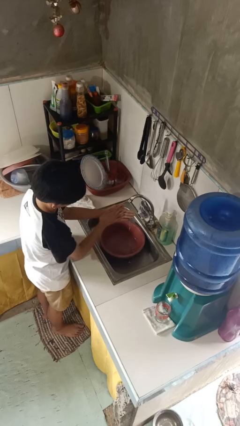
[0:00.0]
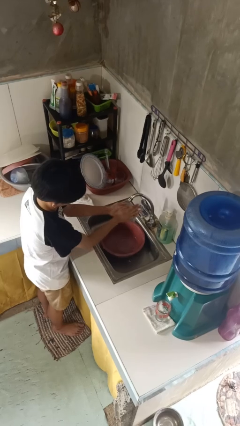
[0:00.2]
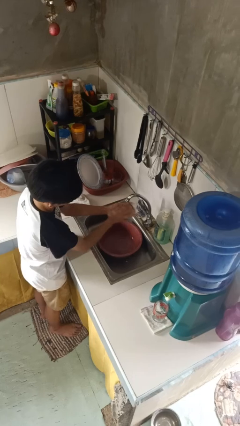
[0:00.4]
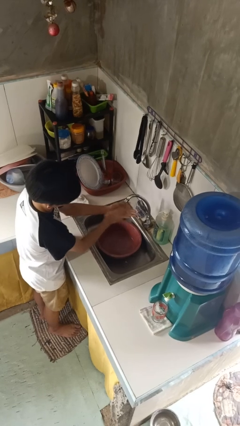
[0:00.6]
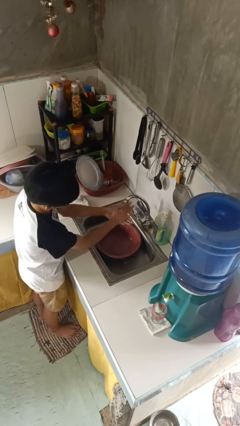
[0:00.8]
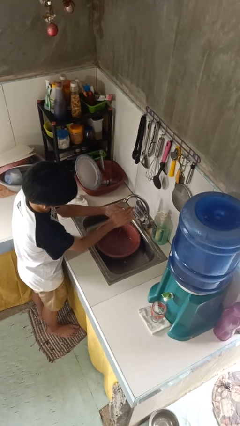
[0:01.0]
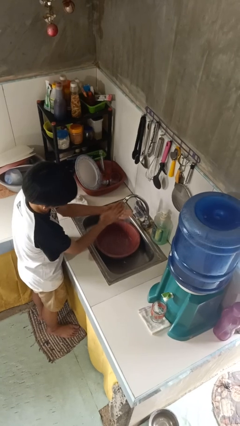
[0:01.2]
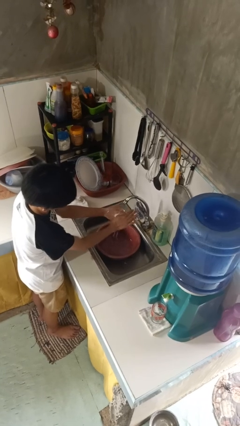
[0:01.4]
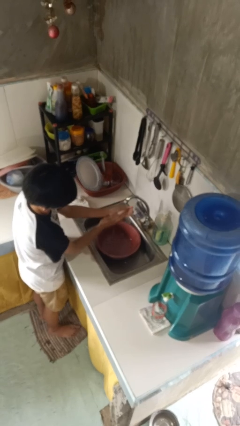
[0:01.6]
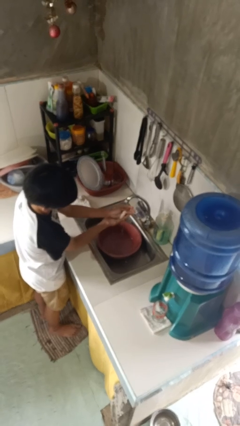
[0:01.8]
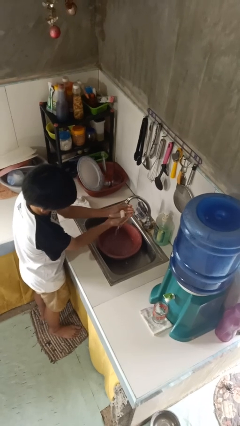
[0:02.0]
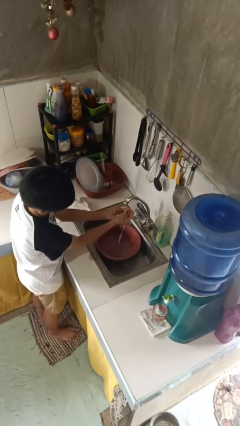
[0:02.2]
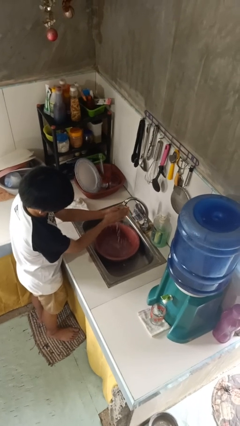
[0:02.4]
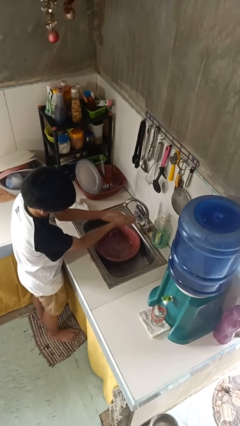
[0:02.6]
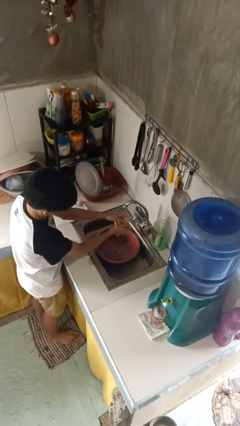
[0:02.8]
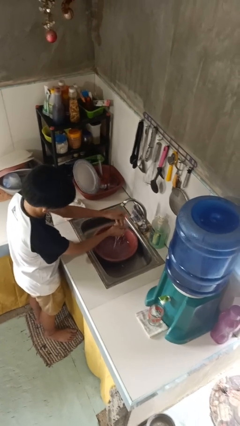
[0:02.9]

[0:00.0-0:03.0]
person washes hands

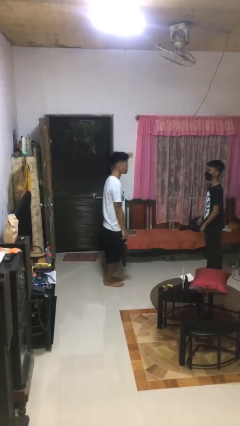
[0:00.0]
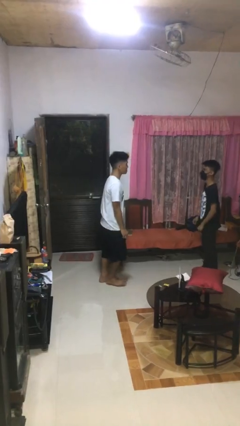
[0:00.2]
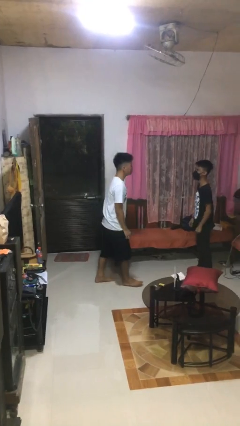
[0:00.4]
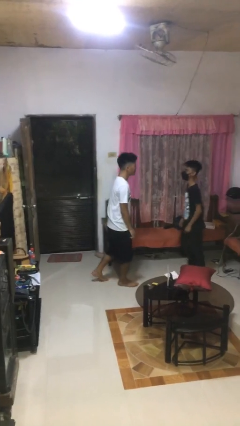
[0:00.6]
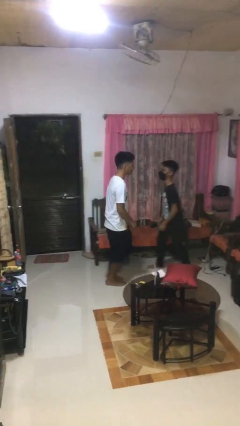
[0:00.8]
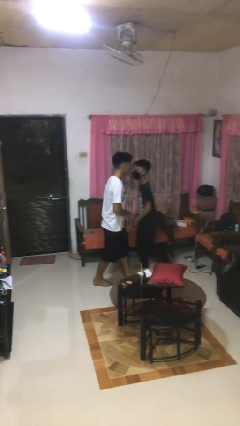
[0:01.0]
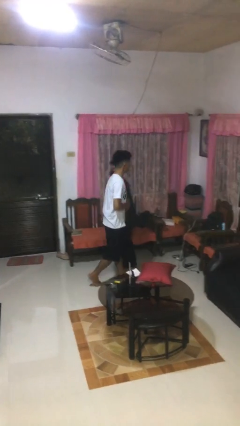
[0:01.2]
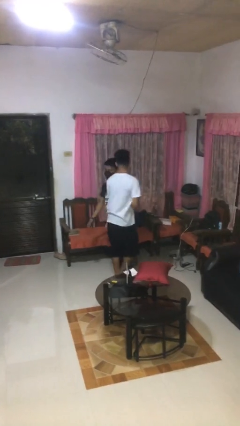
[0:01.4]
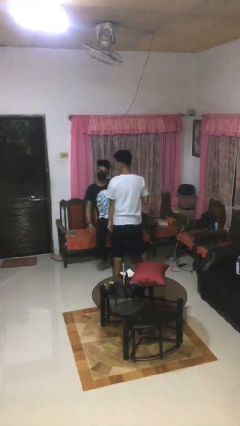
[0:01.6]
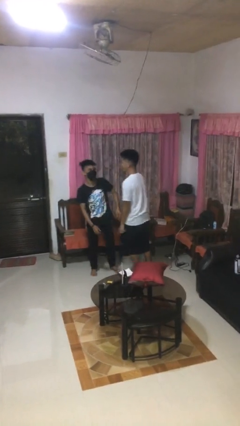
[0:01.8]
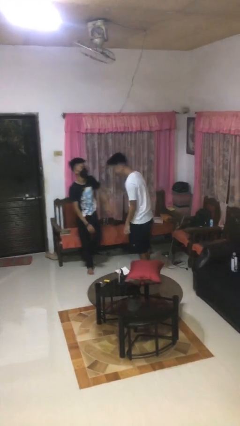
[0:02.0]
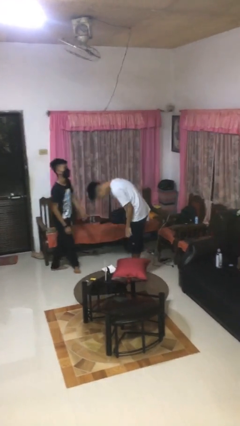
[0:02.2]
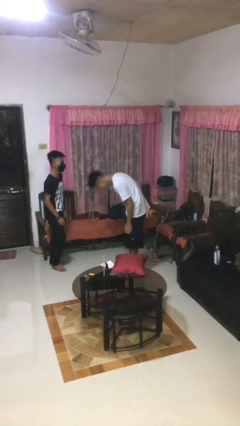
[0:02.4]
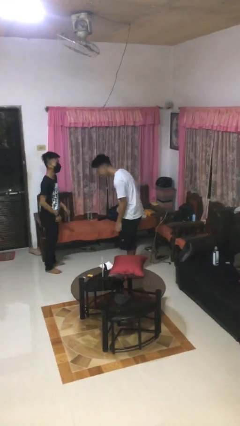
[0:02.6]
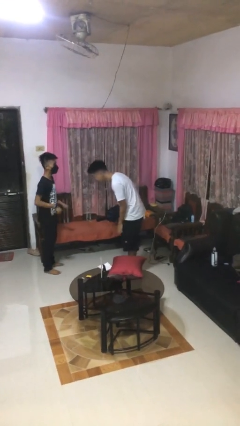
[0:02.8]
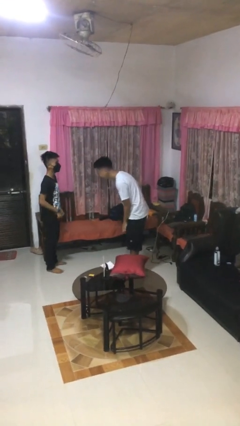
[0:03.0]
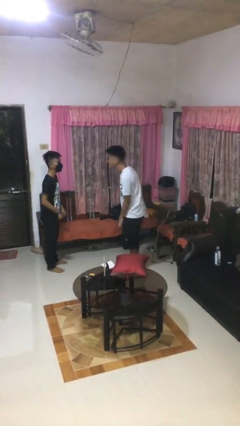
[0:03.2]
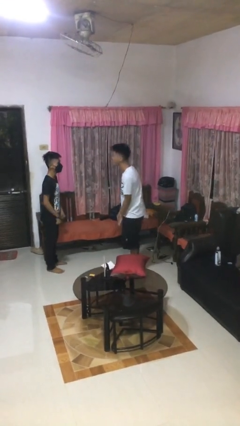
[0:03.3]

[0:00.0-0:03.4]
person bumps into person

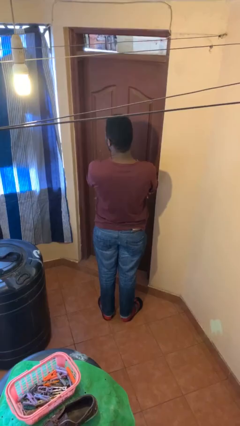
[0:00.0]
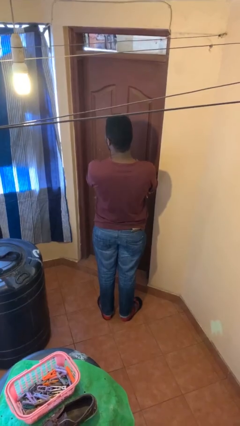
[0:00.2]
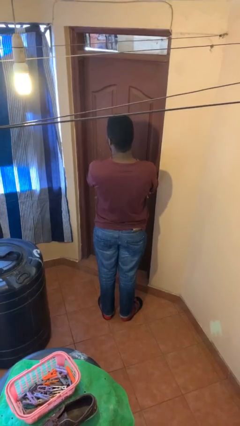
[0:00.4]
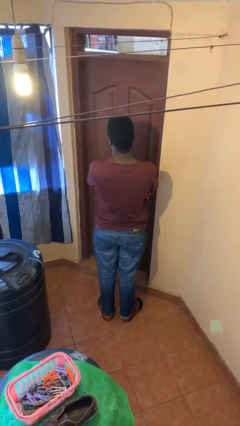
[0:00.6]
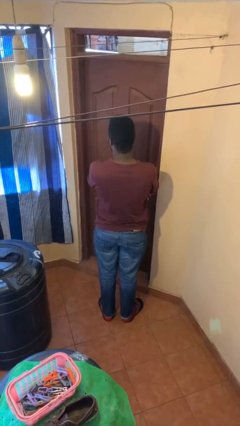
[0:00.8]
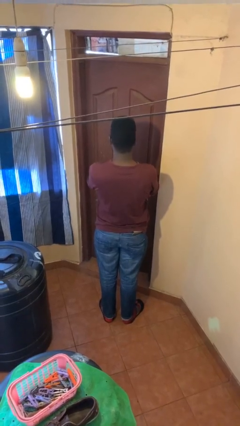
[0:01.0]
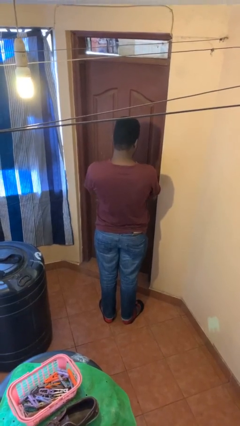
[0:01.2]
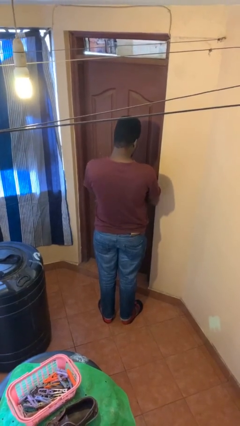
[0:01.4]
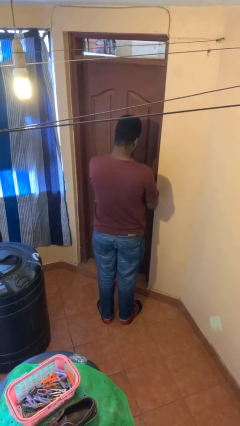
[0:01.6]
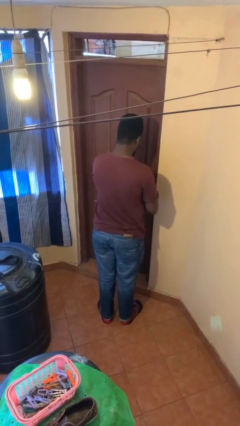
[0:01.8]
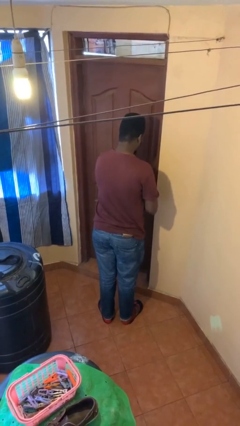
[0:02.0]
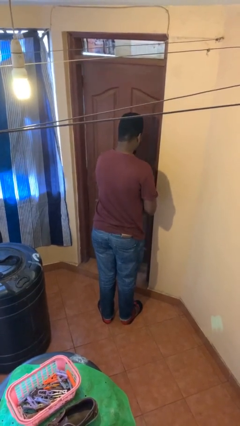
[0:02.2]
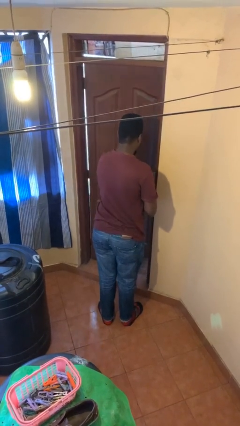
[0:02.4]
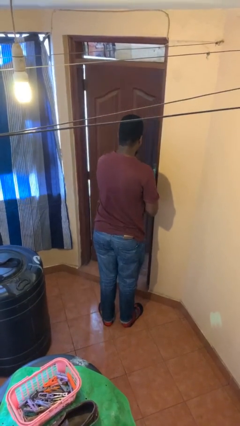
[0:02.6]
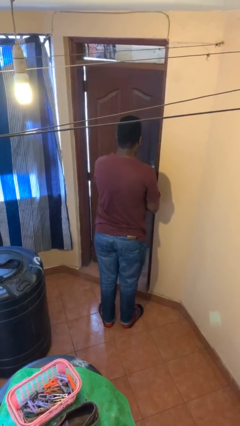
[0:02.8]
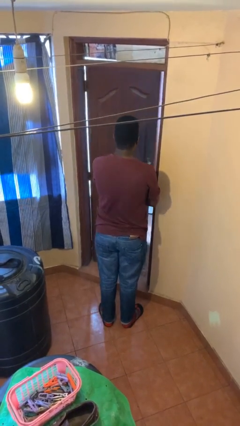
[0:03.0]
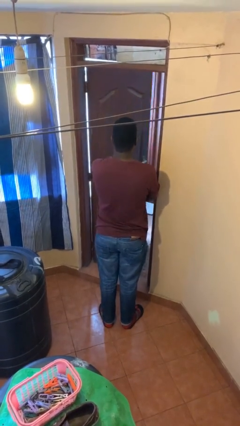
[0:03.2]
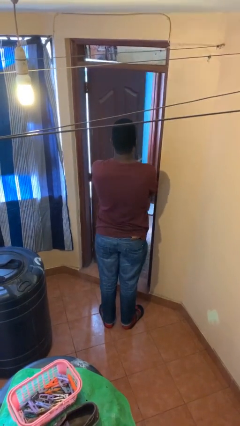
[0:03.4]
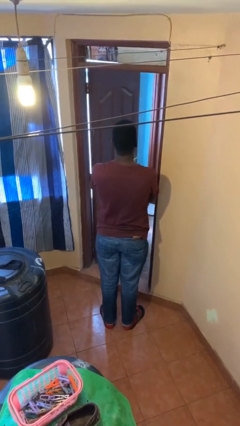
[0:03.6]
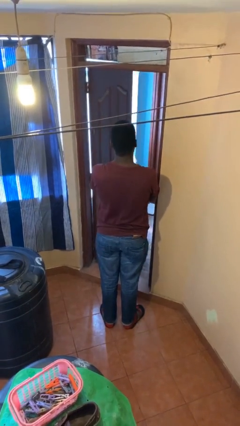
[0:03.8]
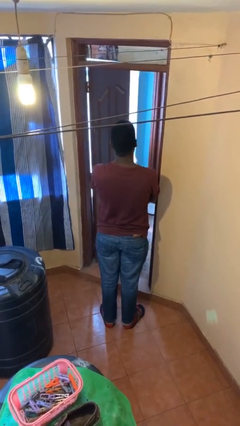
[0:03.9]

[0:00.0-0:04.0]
person opens facility door

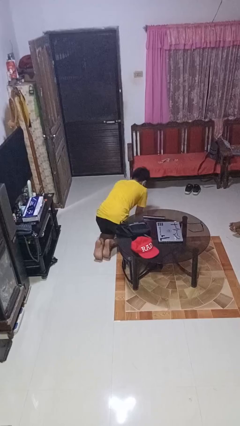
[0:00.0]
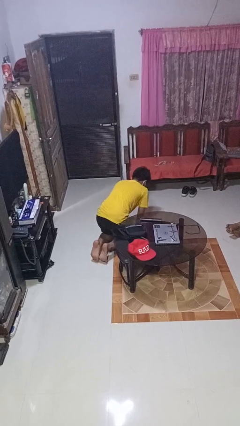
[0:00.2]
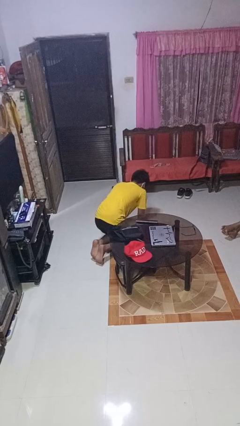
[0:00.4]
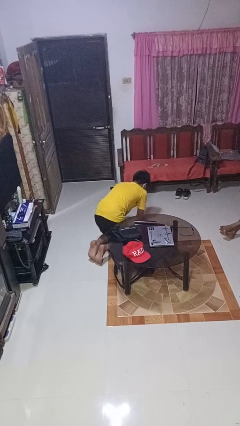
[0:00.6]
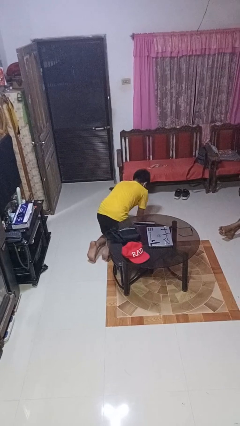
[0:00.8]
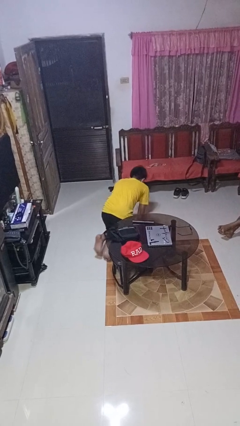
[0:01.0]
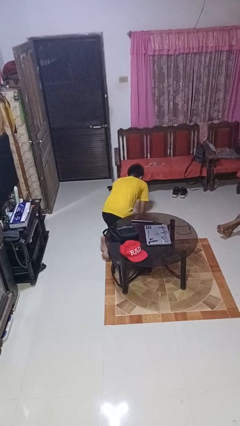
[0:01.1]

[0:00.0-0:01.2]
person crawls

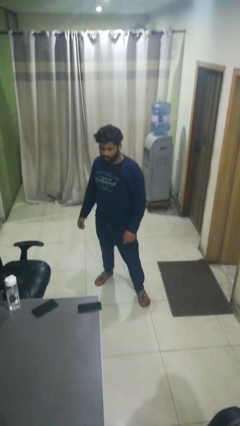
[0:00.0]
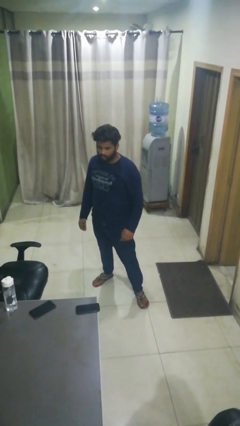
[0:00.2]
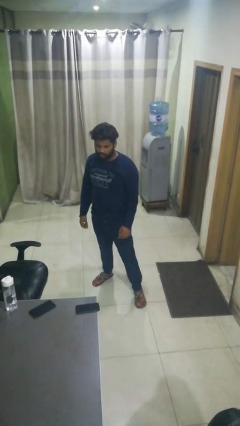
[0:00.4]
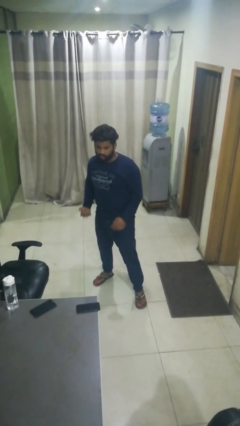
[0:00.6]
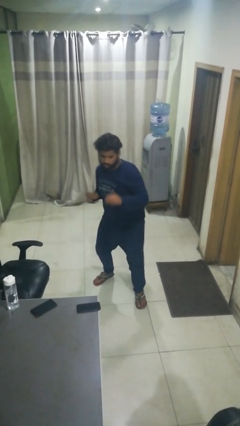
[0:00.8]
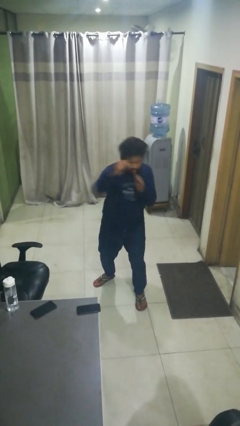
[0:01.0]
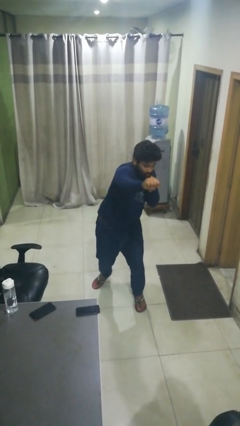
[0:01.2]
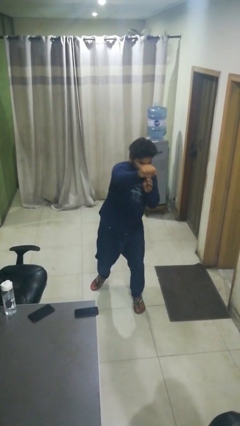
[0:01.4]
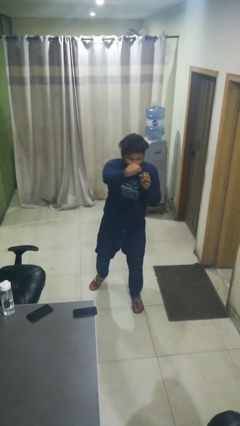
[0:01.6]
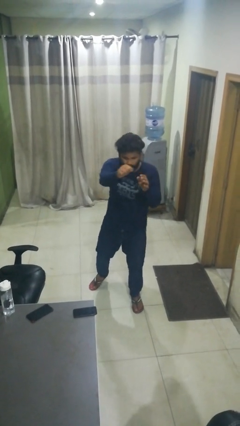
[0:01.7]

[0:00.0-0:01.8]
person punches

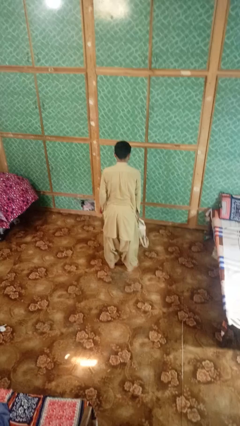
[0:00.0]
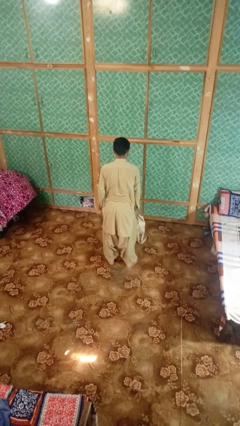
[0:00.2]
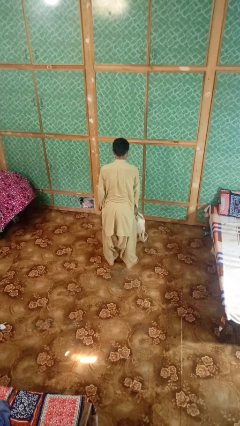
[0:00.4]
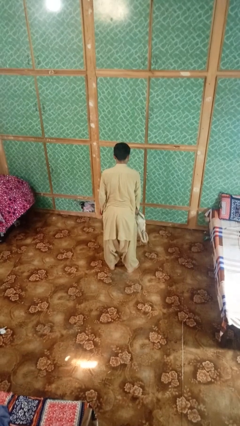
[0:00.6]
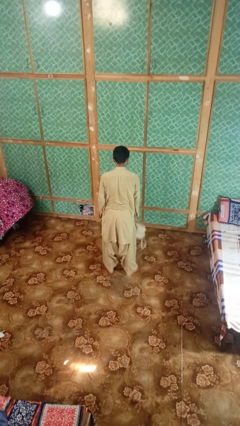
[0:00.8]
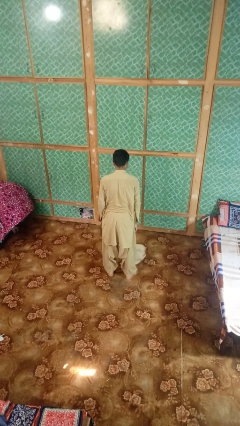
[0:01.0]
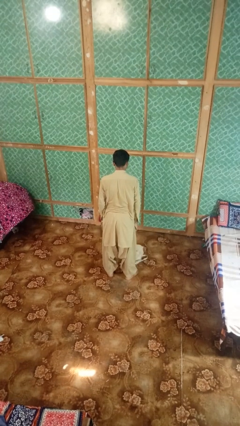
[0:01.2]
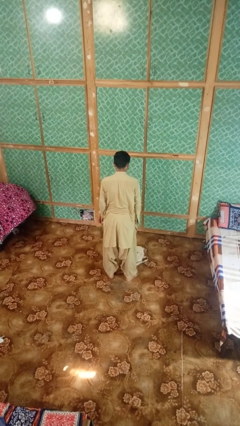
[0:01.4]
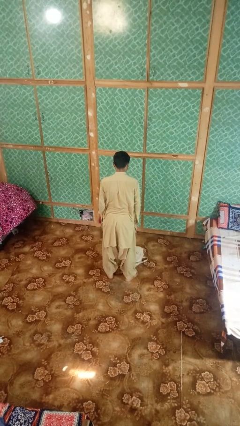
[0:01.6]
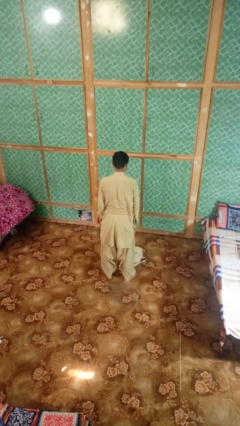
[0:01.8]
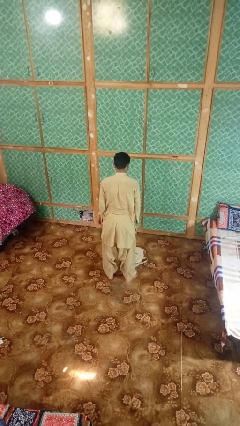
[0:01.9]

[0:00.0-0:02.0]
person throws object to ground

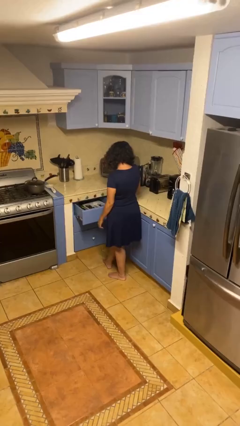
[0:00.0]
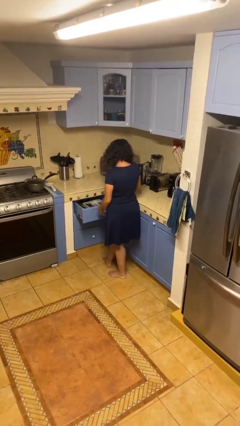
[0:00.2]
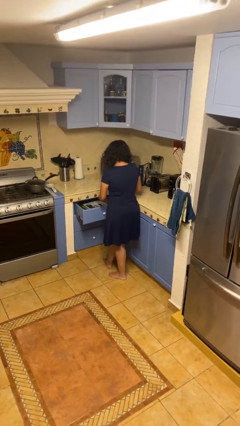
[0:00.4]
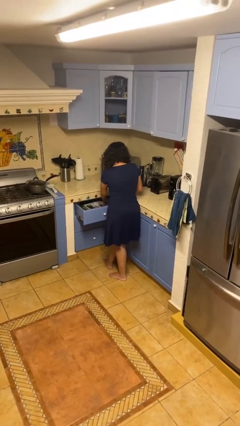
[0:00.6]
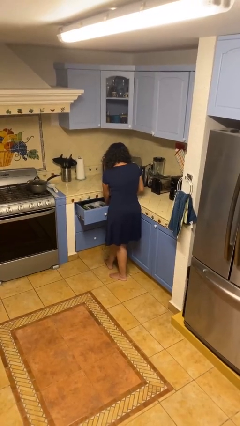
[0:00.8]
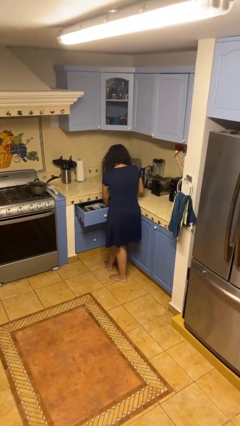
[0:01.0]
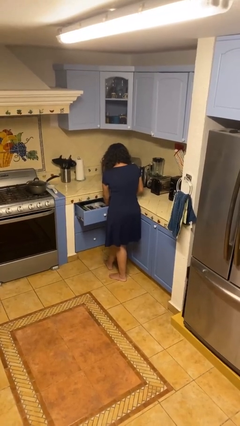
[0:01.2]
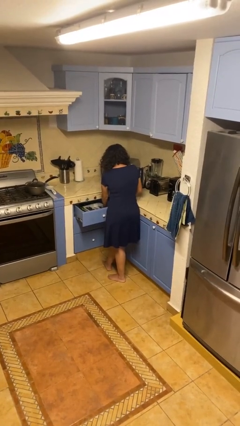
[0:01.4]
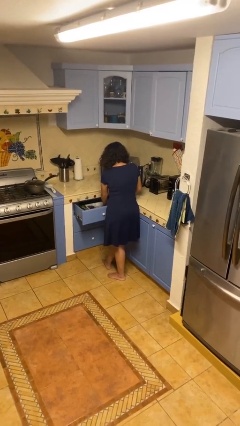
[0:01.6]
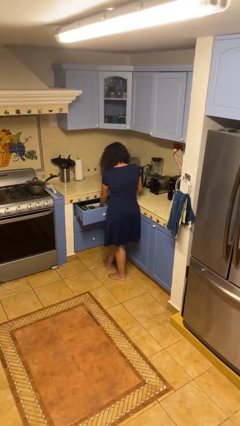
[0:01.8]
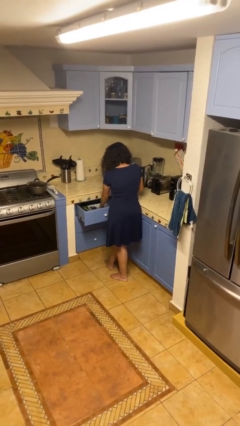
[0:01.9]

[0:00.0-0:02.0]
person searches in kitchen drawer
